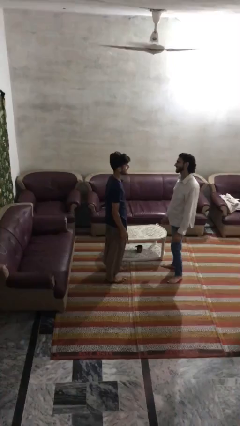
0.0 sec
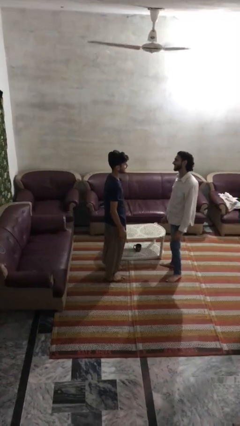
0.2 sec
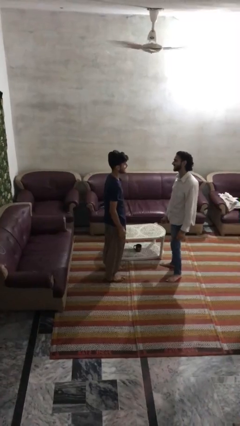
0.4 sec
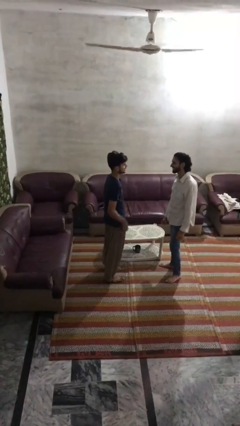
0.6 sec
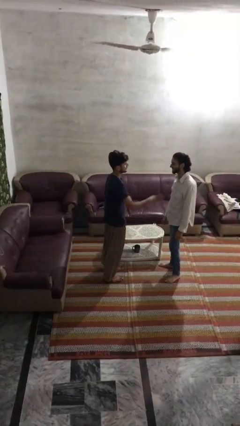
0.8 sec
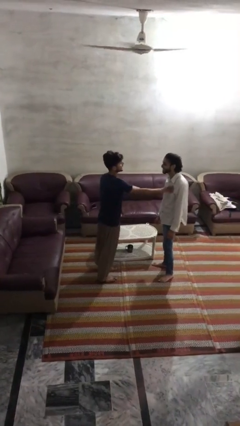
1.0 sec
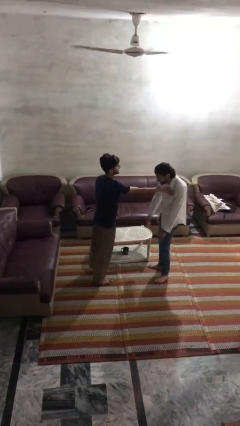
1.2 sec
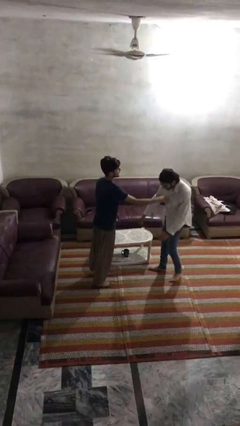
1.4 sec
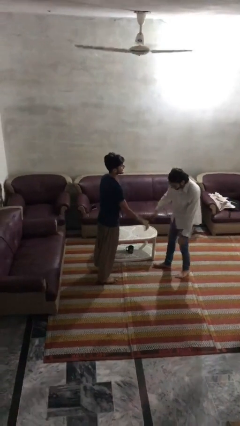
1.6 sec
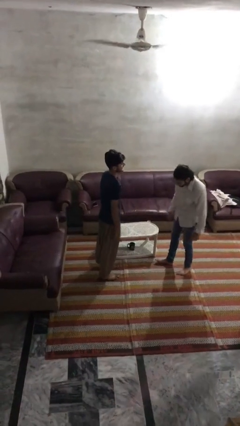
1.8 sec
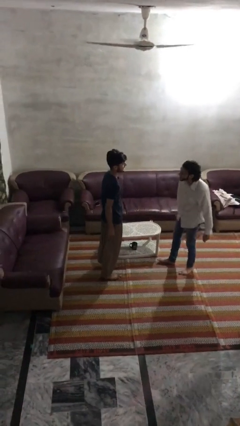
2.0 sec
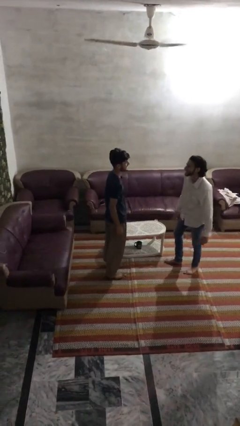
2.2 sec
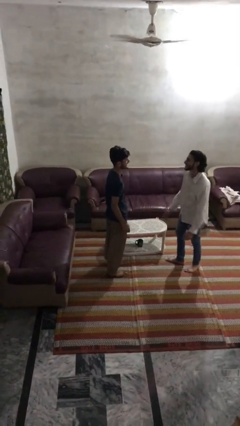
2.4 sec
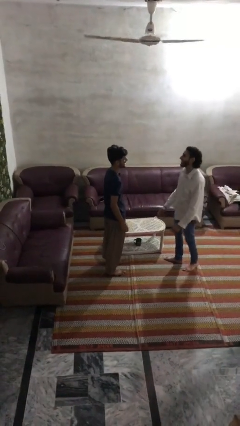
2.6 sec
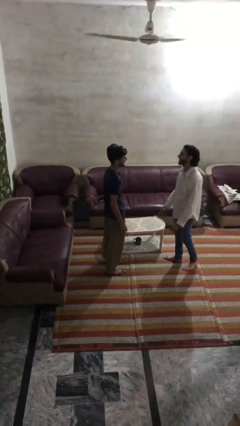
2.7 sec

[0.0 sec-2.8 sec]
person shoves person

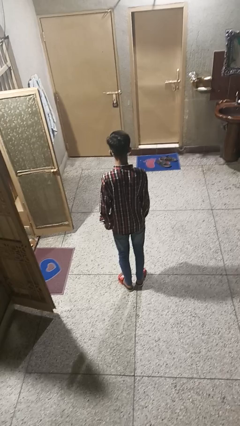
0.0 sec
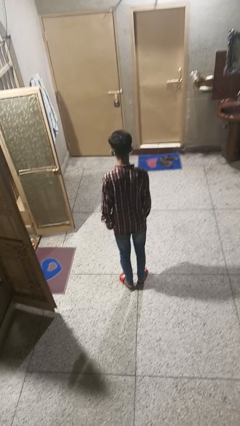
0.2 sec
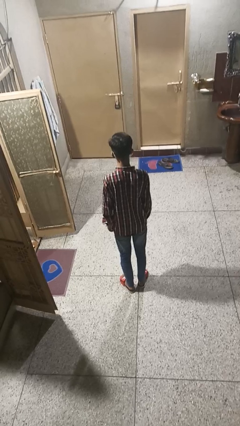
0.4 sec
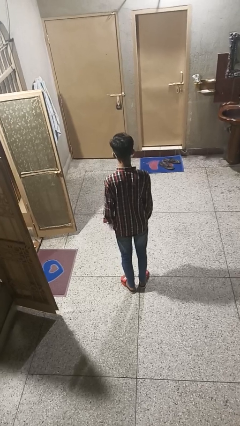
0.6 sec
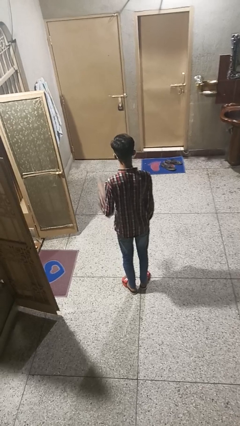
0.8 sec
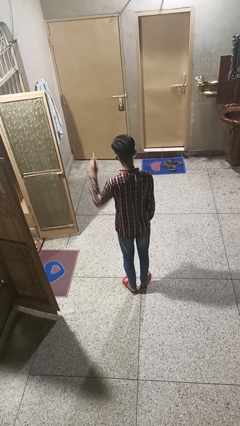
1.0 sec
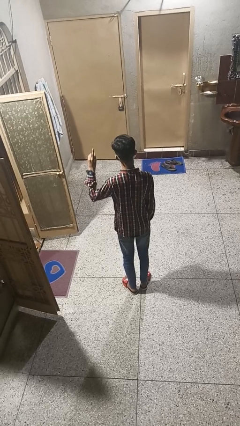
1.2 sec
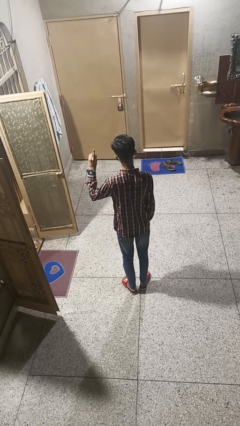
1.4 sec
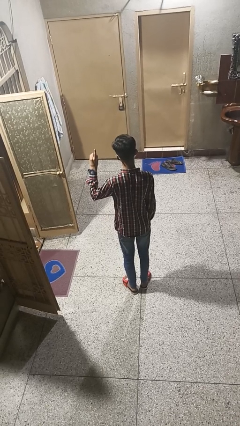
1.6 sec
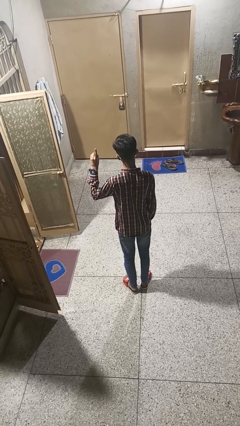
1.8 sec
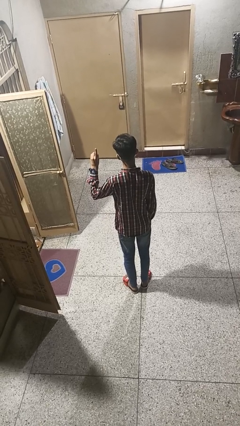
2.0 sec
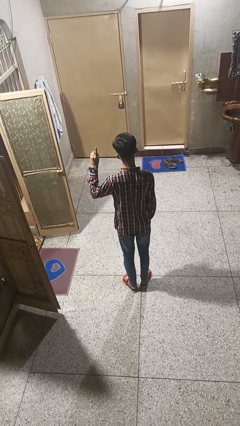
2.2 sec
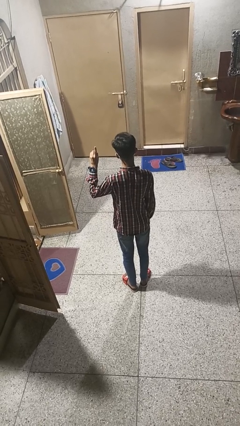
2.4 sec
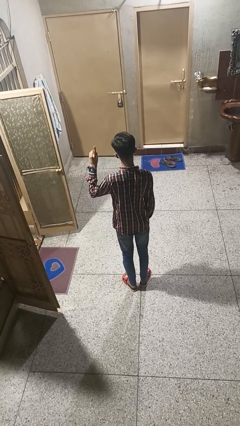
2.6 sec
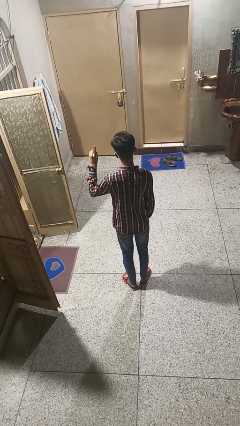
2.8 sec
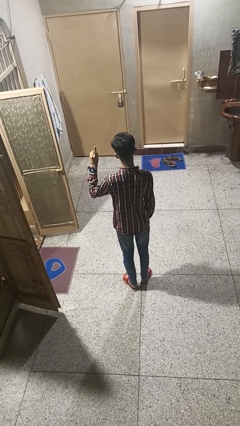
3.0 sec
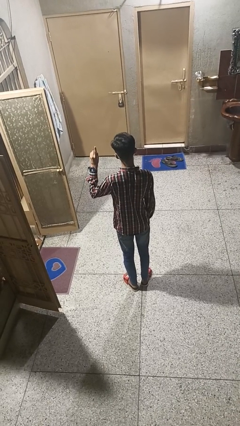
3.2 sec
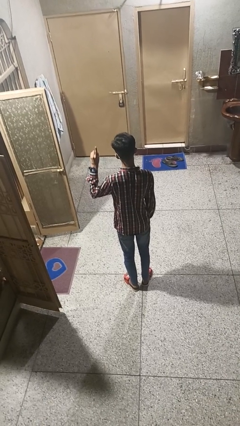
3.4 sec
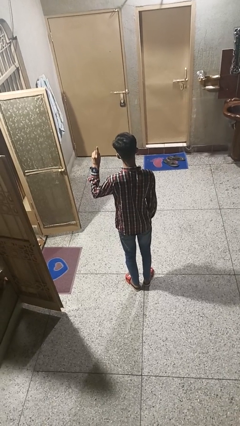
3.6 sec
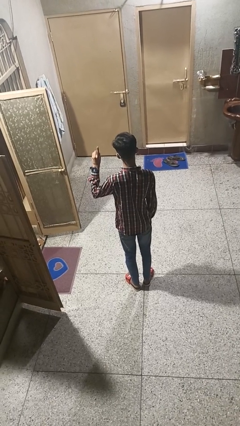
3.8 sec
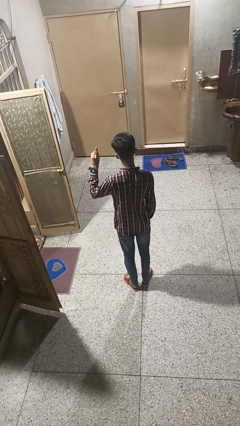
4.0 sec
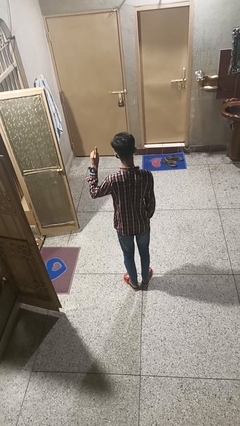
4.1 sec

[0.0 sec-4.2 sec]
person gestures number one

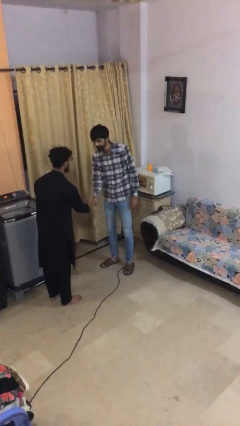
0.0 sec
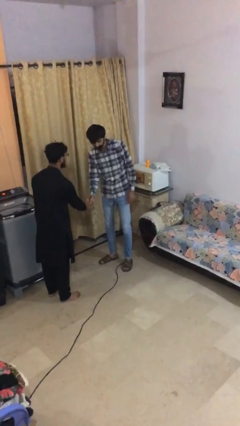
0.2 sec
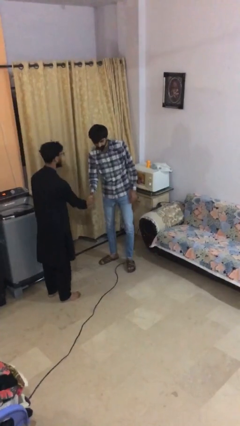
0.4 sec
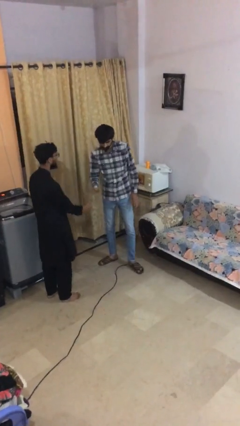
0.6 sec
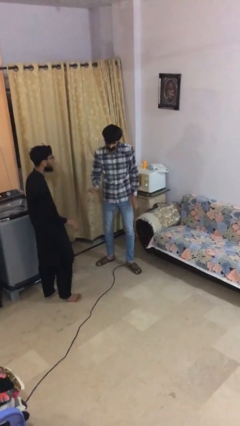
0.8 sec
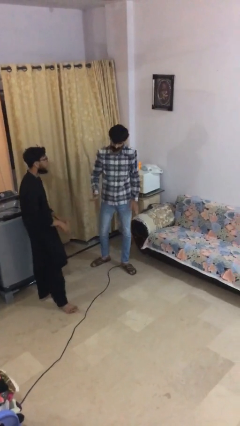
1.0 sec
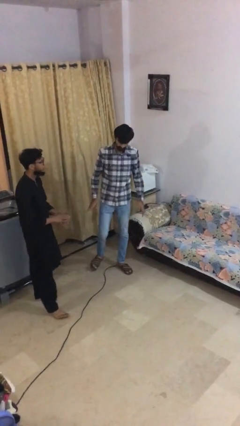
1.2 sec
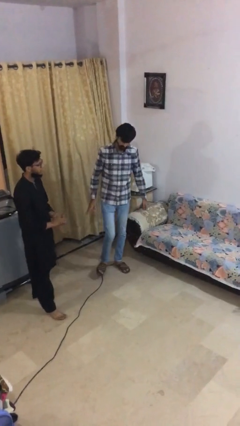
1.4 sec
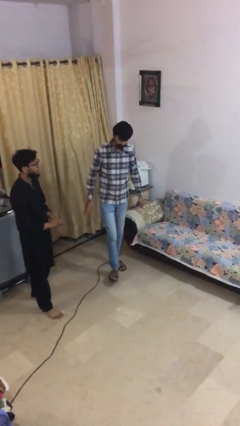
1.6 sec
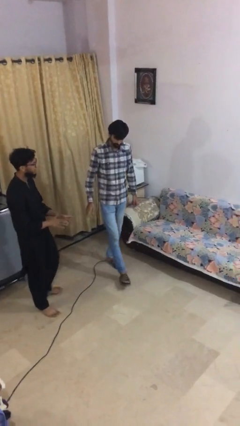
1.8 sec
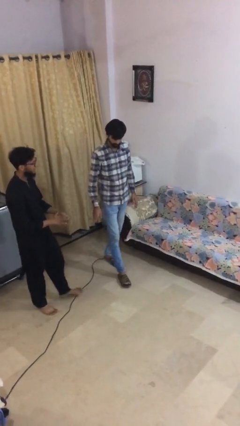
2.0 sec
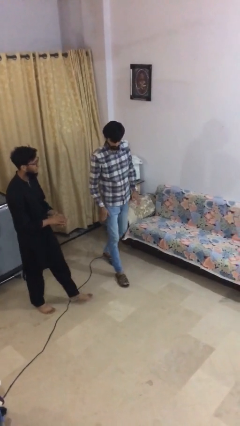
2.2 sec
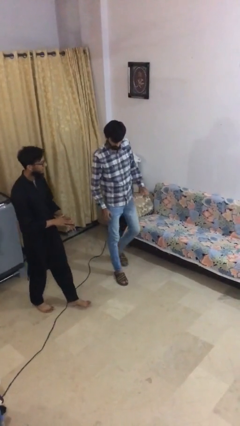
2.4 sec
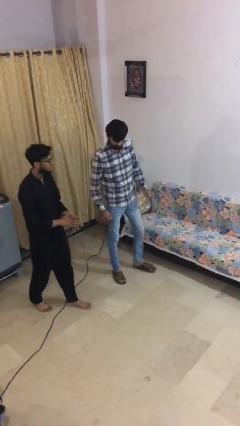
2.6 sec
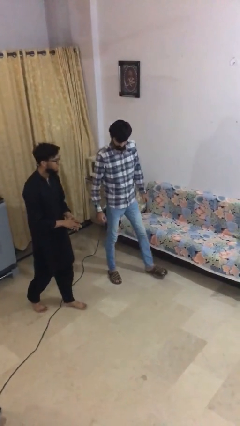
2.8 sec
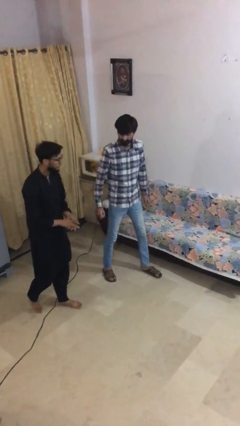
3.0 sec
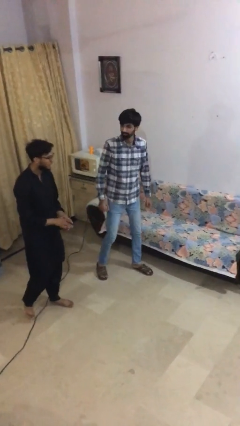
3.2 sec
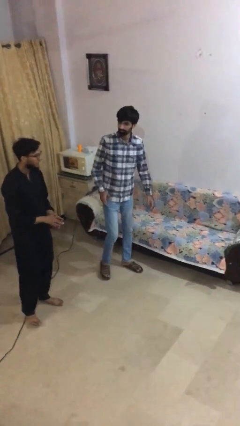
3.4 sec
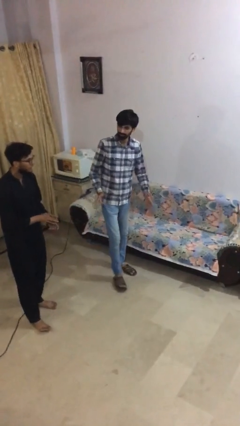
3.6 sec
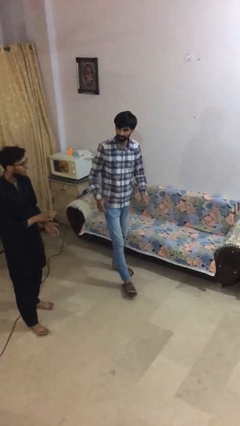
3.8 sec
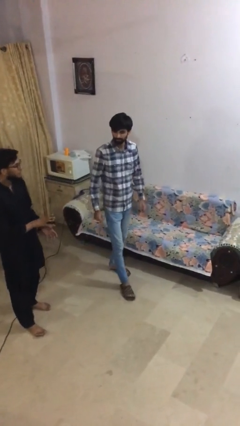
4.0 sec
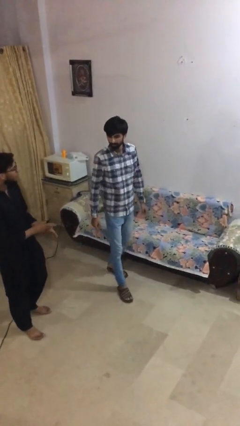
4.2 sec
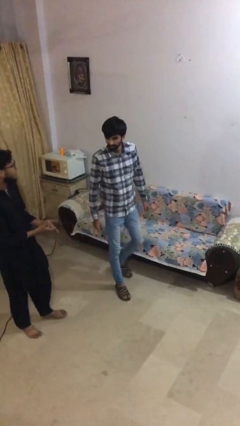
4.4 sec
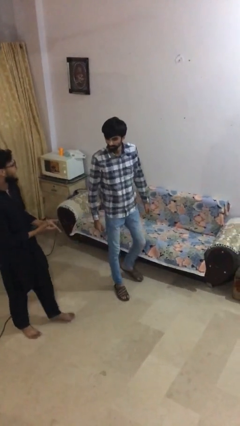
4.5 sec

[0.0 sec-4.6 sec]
person talks to person

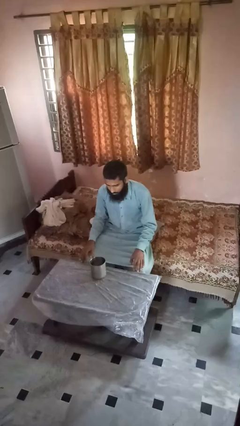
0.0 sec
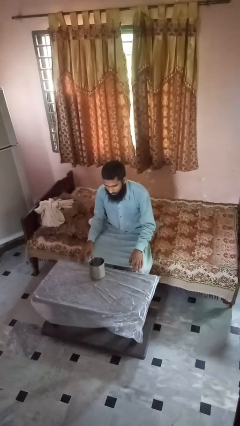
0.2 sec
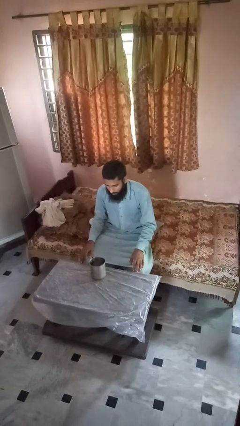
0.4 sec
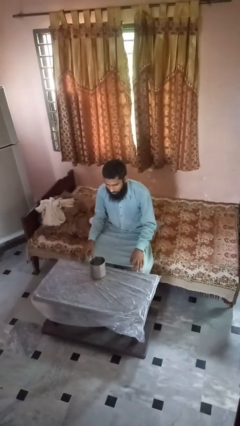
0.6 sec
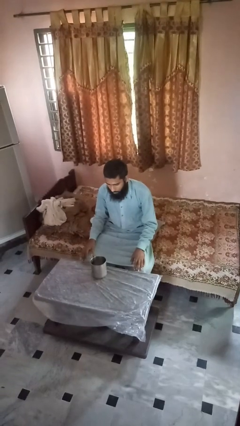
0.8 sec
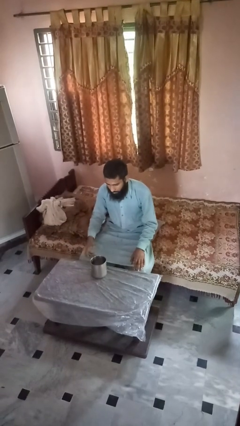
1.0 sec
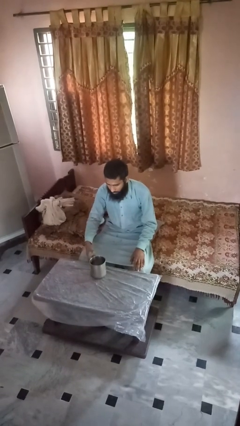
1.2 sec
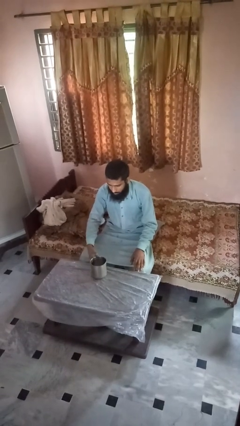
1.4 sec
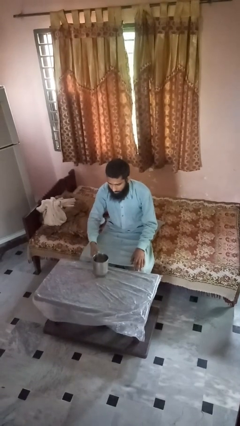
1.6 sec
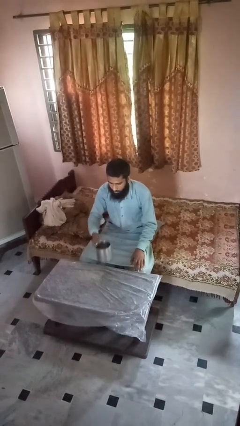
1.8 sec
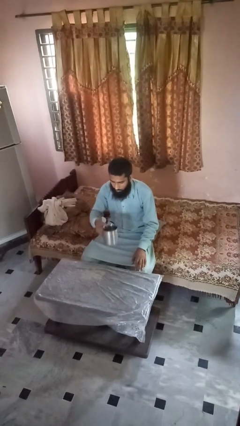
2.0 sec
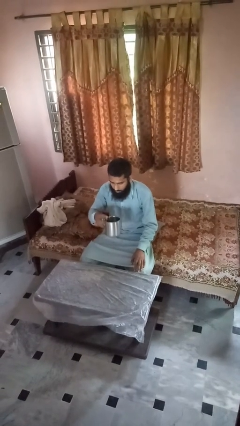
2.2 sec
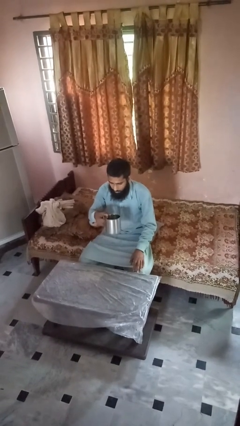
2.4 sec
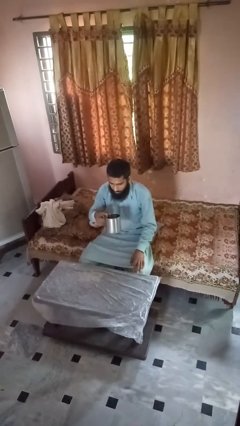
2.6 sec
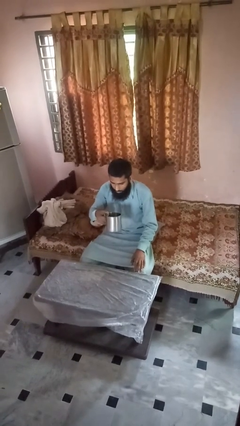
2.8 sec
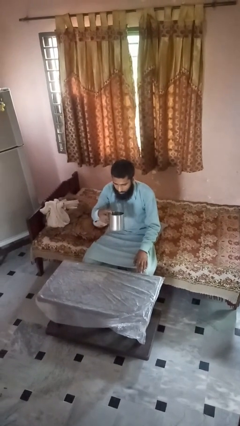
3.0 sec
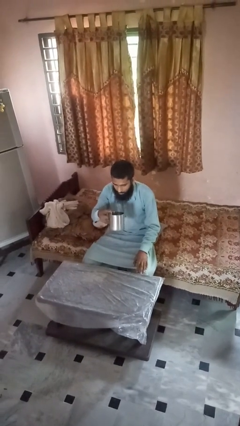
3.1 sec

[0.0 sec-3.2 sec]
person picks up object from table

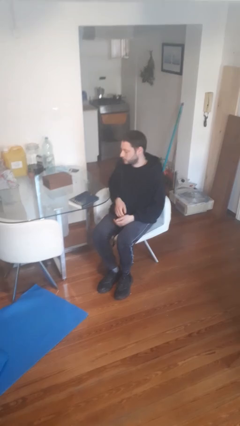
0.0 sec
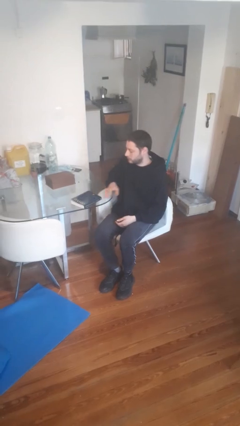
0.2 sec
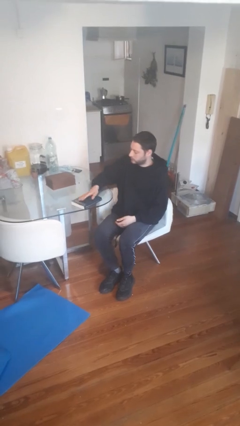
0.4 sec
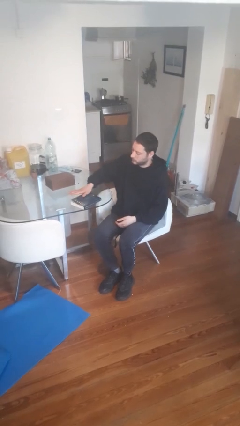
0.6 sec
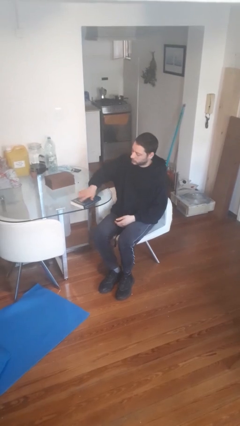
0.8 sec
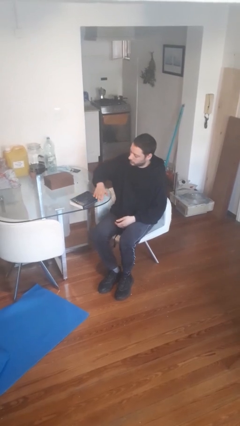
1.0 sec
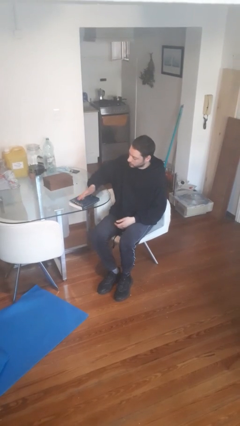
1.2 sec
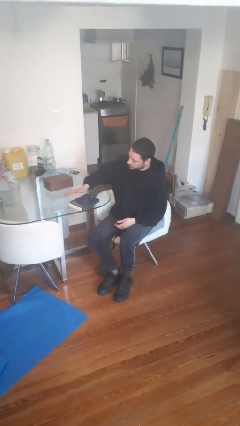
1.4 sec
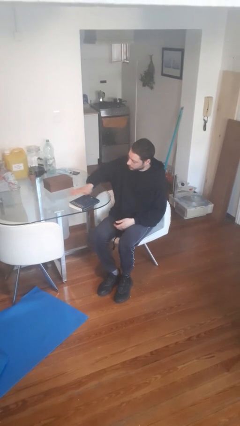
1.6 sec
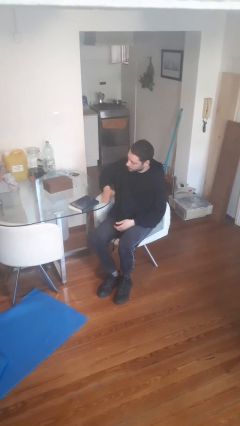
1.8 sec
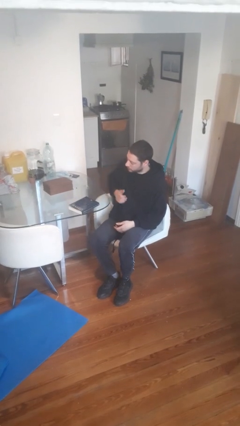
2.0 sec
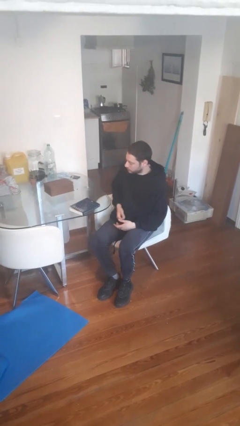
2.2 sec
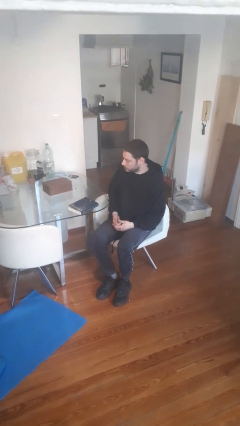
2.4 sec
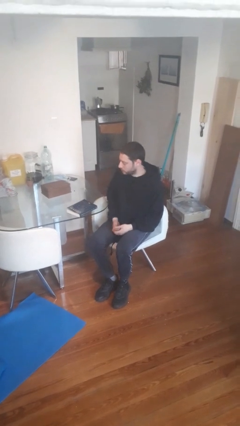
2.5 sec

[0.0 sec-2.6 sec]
person waves hand over object

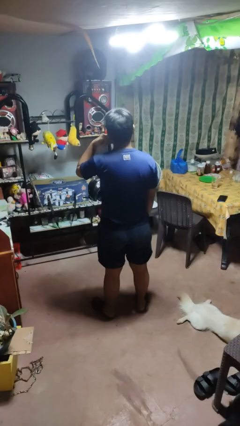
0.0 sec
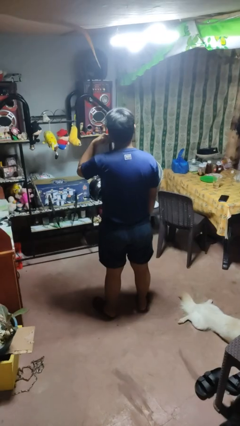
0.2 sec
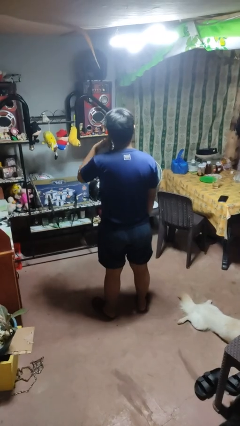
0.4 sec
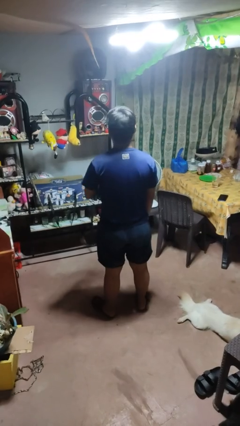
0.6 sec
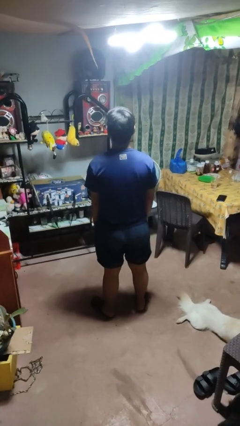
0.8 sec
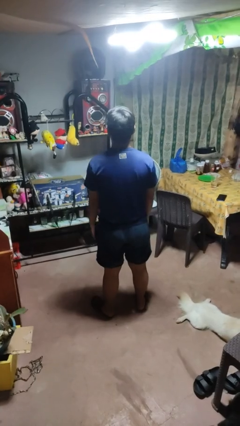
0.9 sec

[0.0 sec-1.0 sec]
person gestures call me
